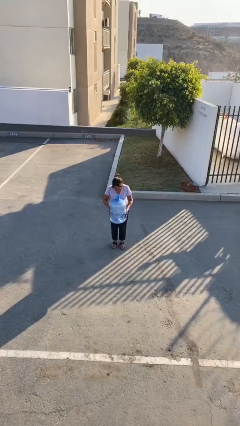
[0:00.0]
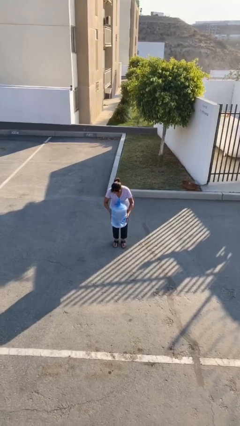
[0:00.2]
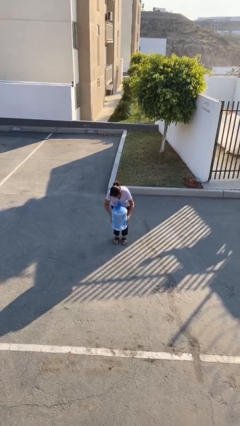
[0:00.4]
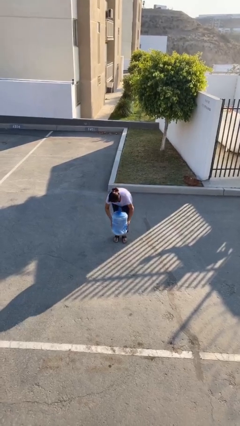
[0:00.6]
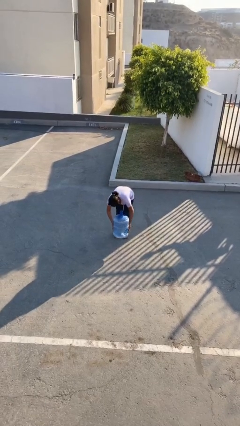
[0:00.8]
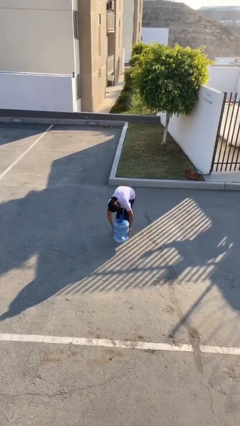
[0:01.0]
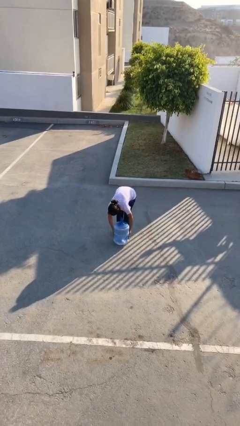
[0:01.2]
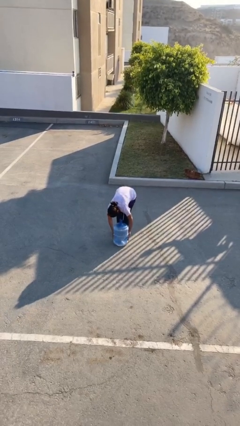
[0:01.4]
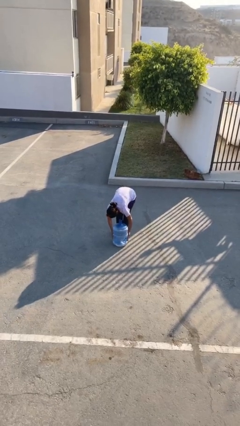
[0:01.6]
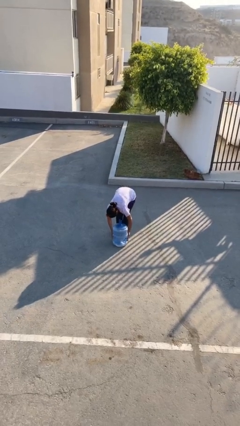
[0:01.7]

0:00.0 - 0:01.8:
person puts down object on floor

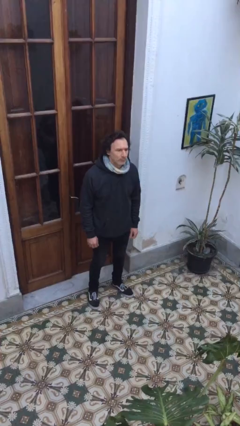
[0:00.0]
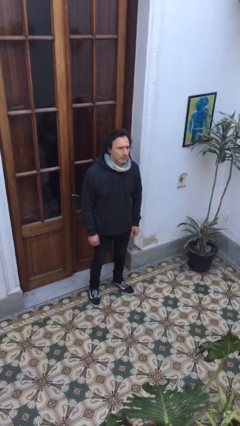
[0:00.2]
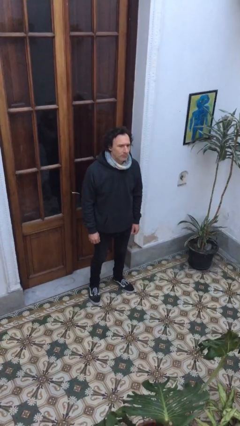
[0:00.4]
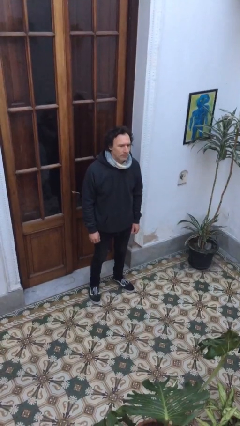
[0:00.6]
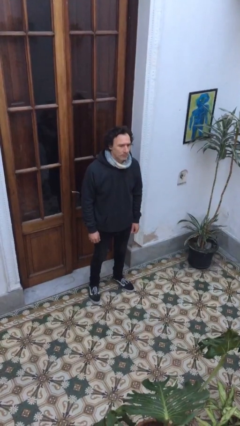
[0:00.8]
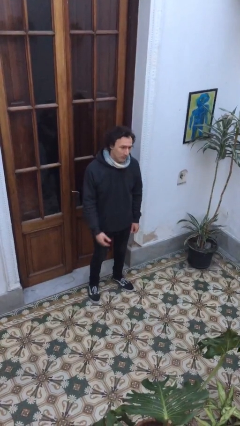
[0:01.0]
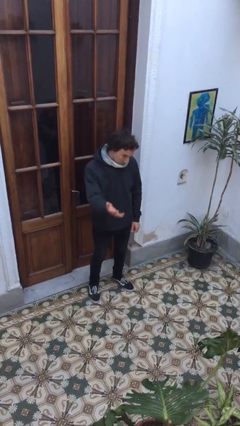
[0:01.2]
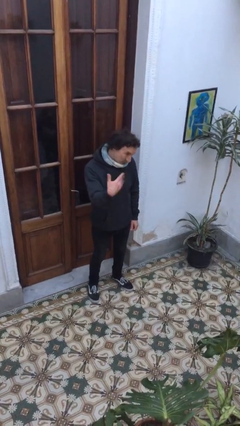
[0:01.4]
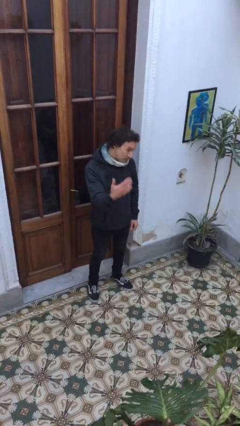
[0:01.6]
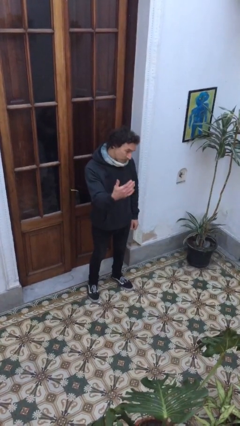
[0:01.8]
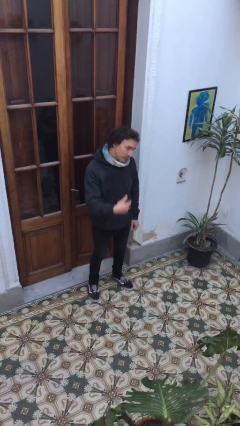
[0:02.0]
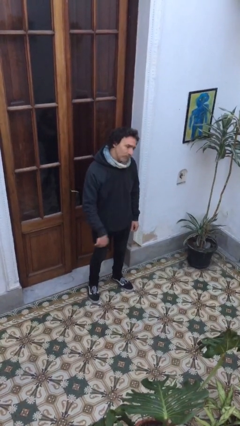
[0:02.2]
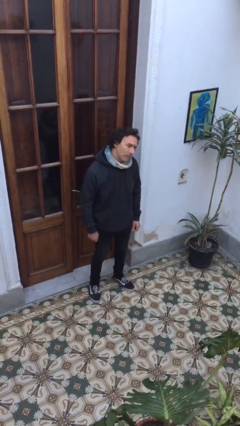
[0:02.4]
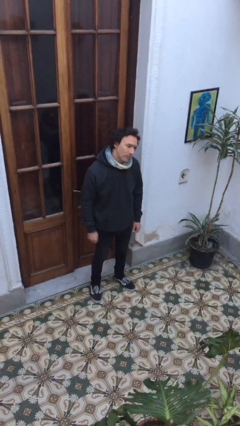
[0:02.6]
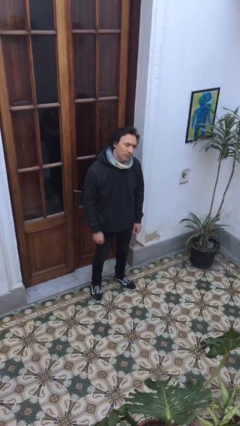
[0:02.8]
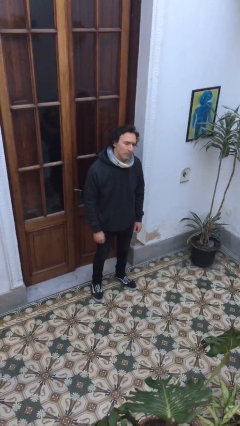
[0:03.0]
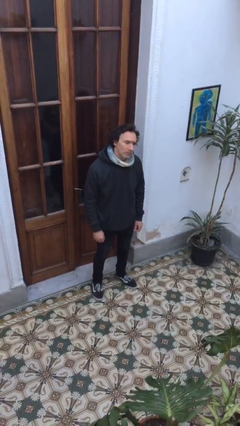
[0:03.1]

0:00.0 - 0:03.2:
person gestures come here

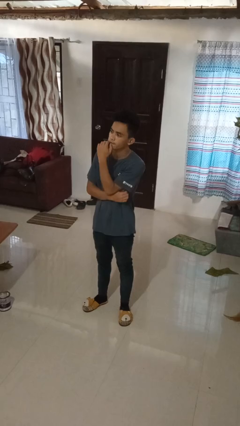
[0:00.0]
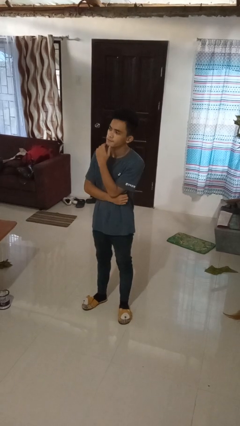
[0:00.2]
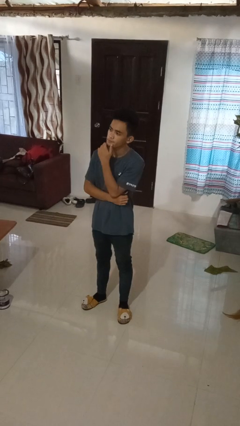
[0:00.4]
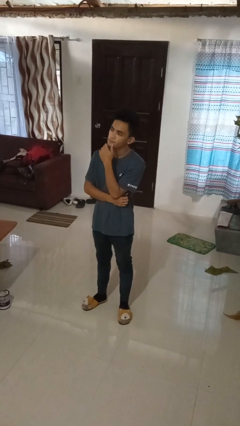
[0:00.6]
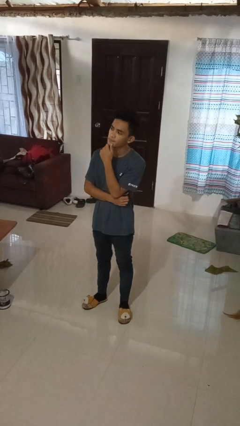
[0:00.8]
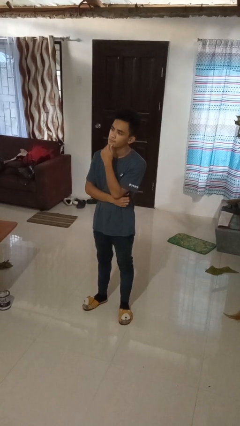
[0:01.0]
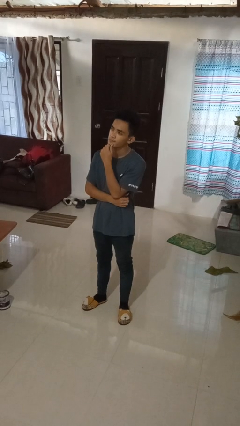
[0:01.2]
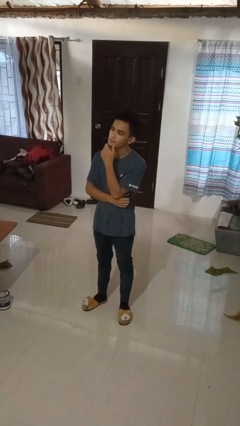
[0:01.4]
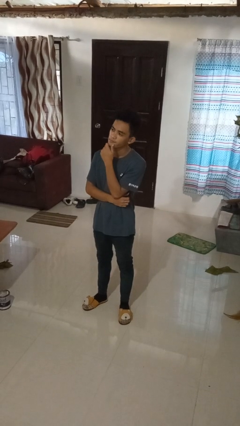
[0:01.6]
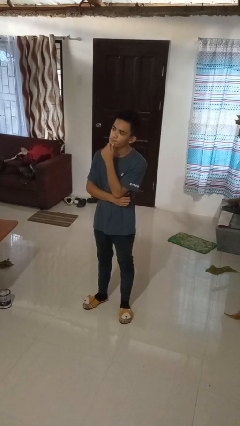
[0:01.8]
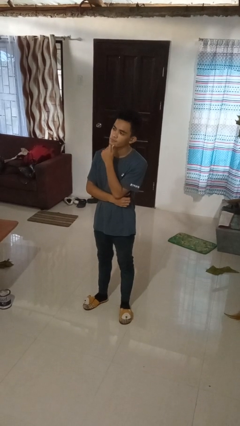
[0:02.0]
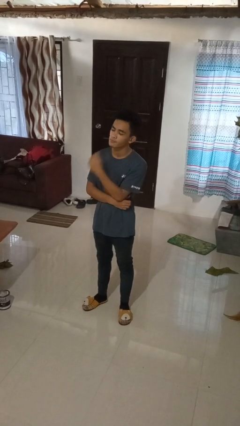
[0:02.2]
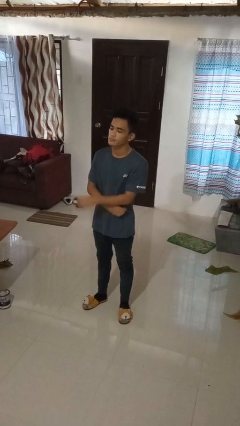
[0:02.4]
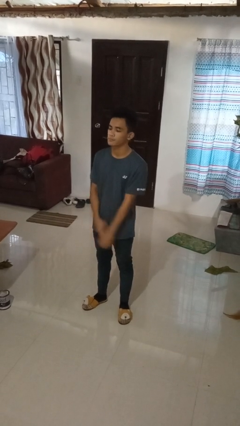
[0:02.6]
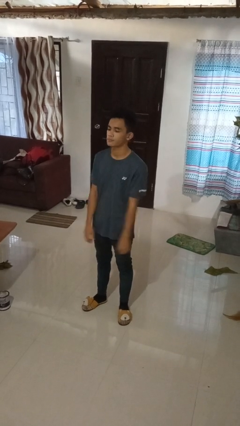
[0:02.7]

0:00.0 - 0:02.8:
person strokes chin

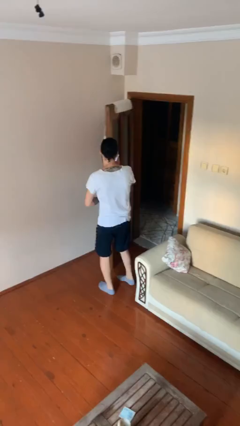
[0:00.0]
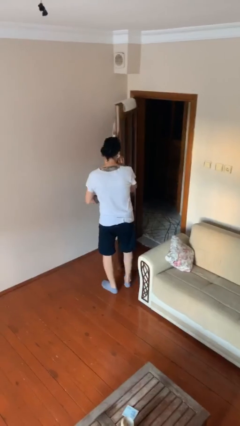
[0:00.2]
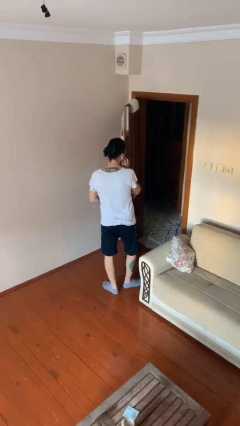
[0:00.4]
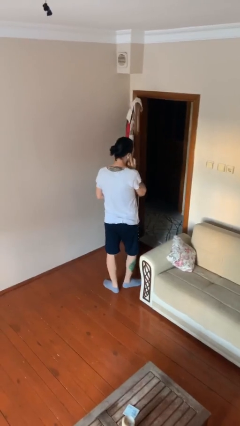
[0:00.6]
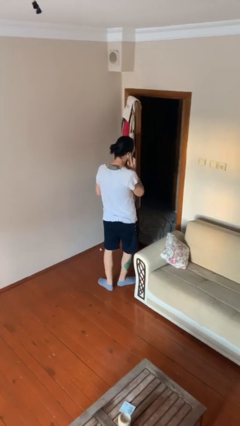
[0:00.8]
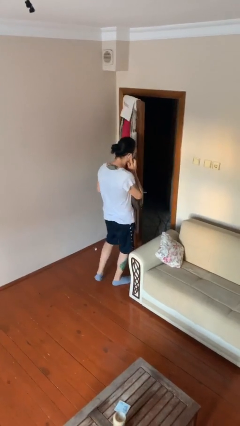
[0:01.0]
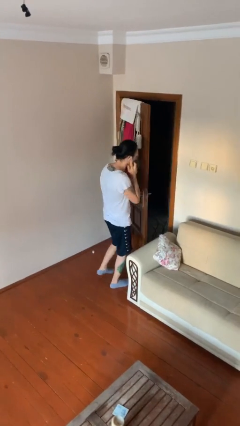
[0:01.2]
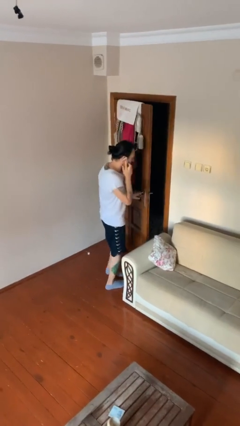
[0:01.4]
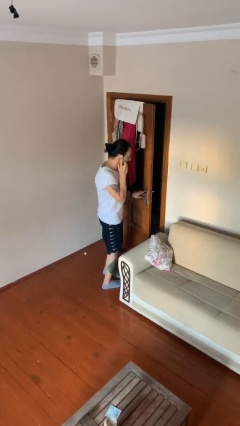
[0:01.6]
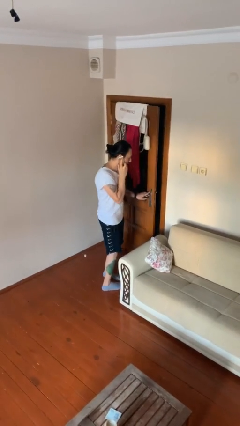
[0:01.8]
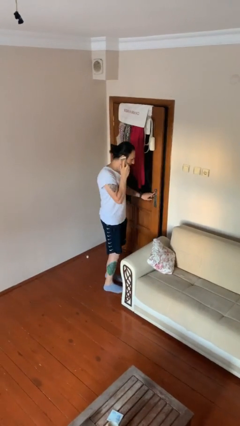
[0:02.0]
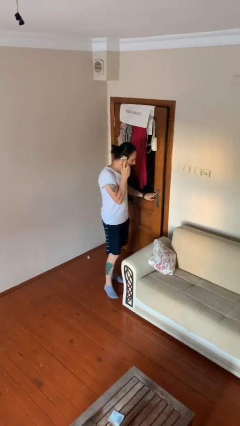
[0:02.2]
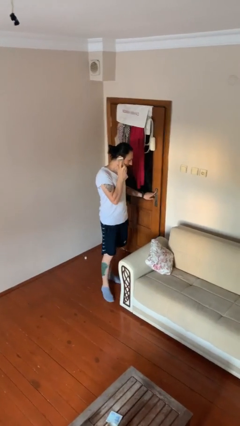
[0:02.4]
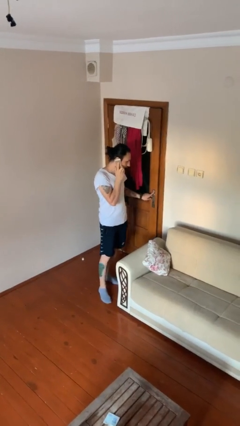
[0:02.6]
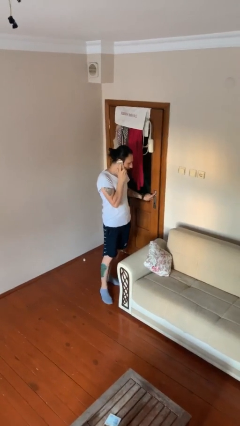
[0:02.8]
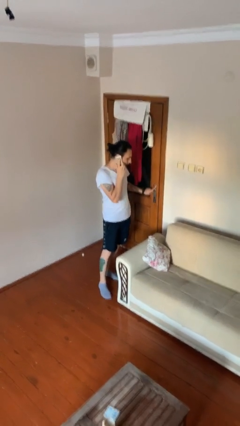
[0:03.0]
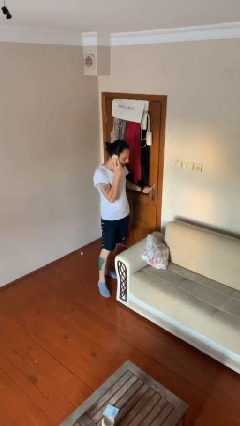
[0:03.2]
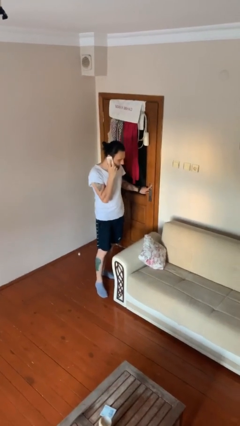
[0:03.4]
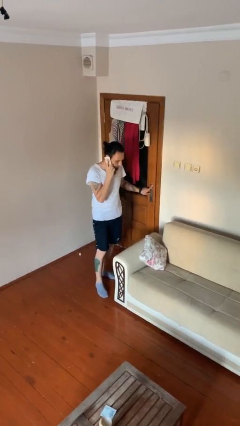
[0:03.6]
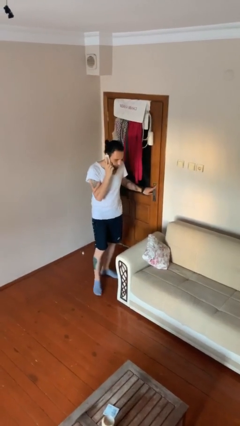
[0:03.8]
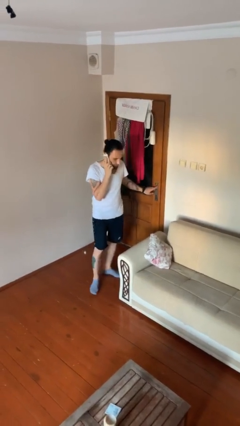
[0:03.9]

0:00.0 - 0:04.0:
person closes facility door
